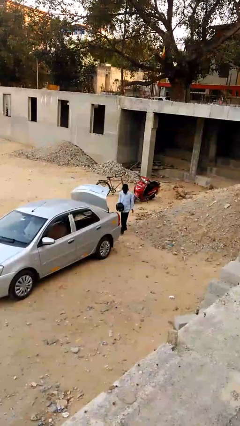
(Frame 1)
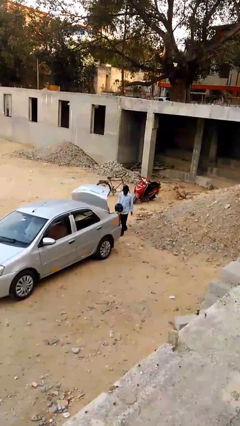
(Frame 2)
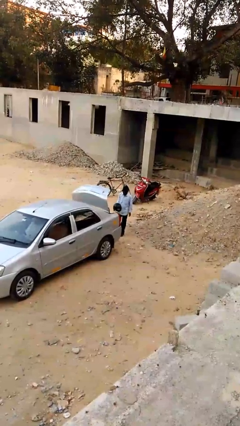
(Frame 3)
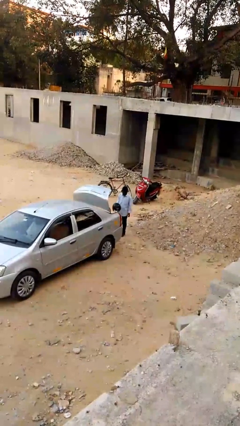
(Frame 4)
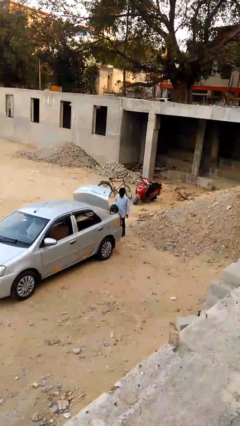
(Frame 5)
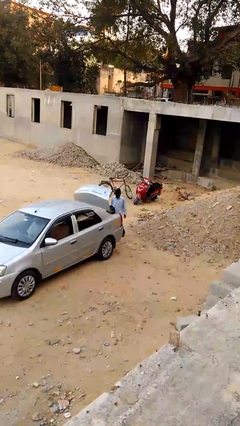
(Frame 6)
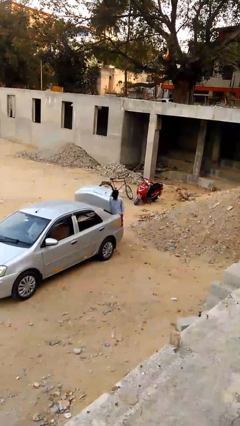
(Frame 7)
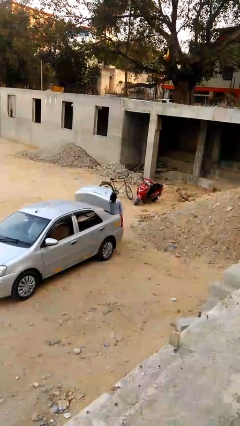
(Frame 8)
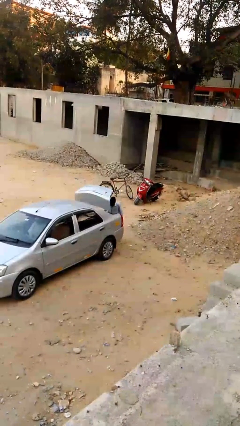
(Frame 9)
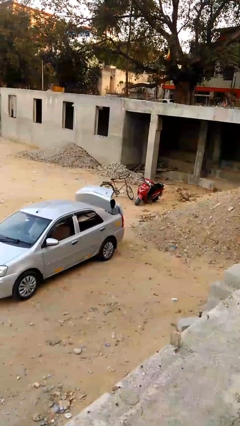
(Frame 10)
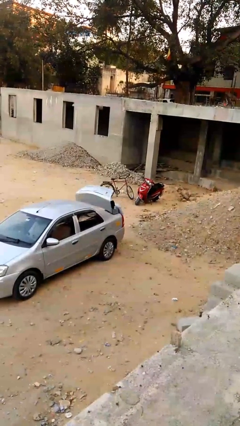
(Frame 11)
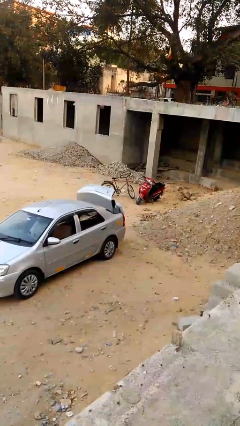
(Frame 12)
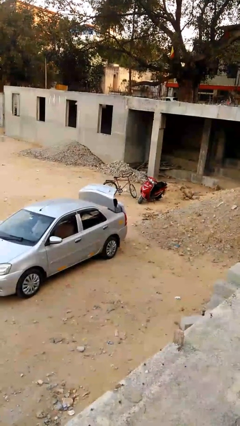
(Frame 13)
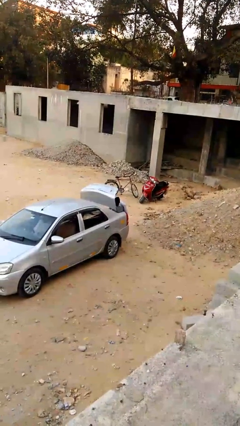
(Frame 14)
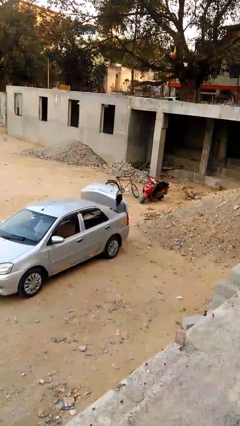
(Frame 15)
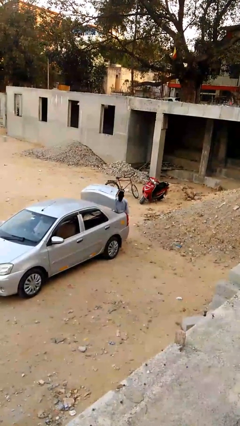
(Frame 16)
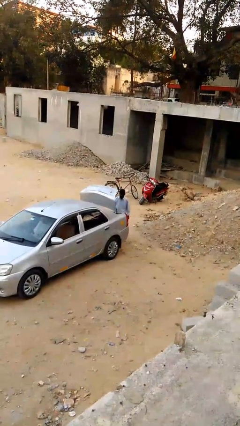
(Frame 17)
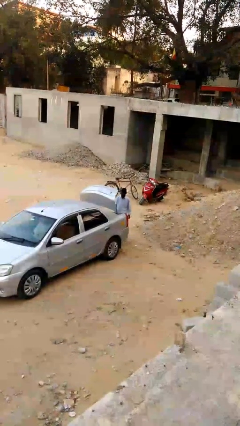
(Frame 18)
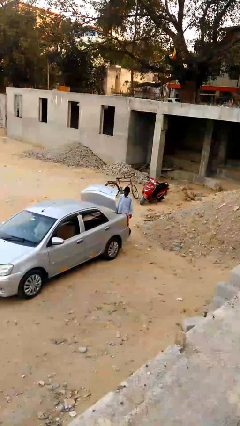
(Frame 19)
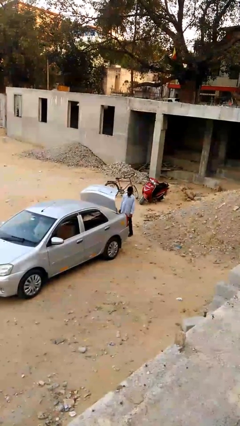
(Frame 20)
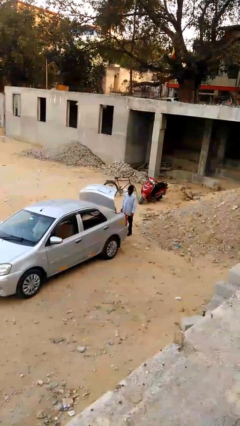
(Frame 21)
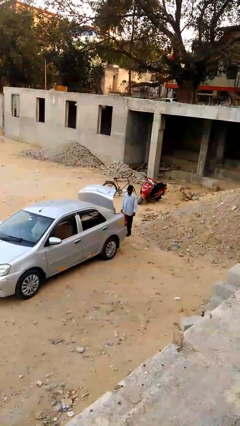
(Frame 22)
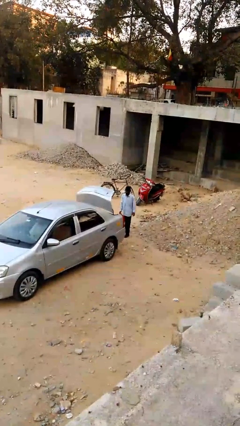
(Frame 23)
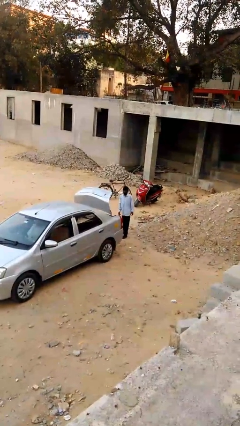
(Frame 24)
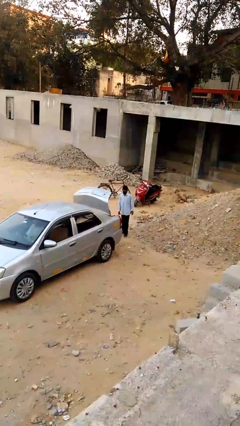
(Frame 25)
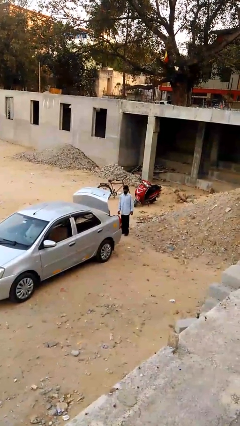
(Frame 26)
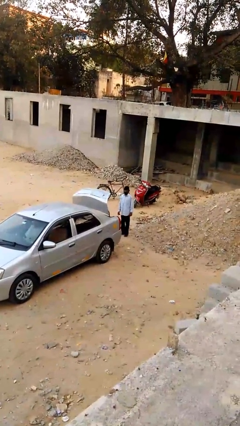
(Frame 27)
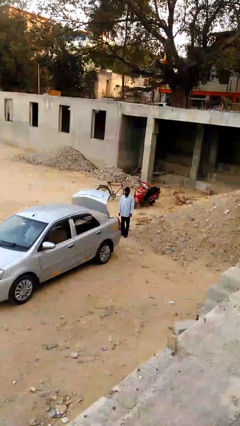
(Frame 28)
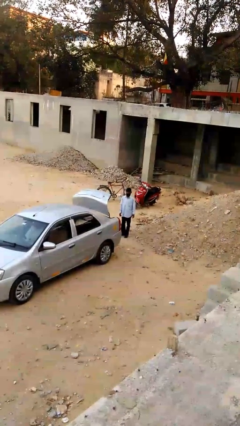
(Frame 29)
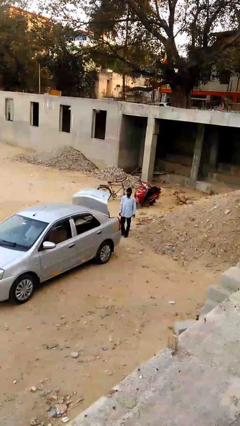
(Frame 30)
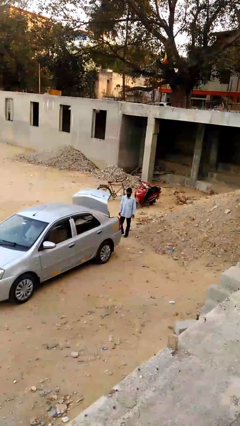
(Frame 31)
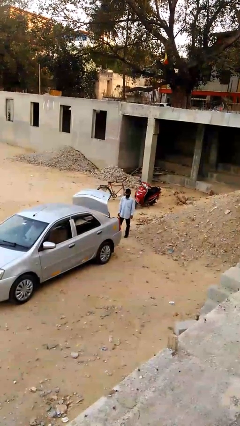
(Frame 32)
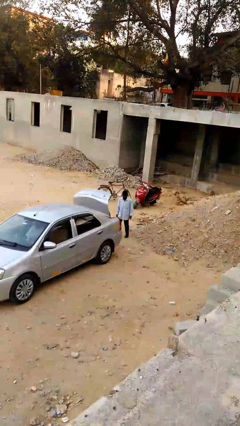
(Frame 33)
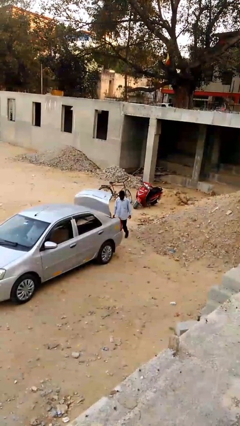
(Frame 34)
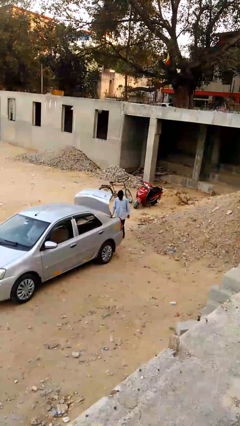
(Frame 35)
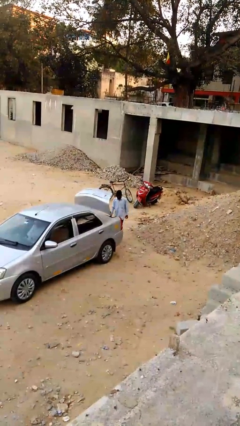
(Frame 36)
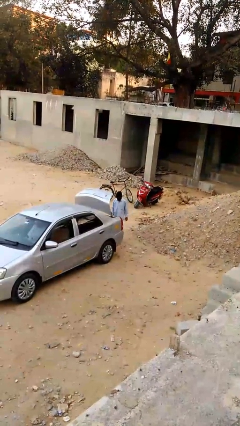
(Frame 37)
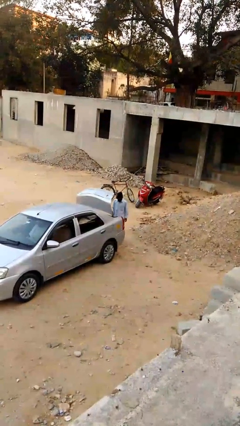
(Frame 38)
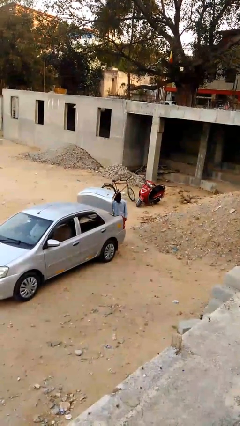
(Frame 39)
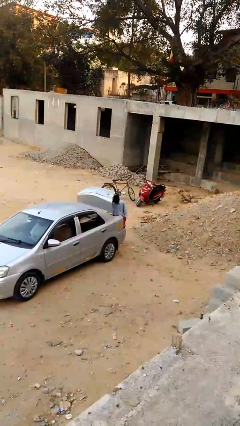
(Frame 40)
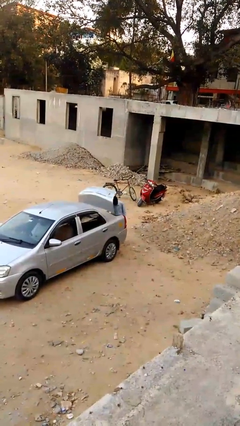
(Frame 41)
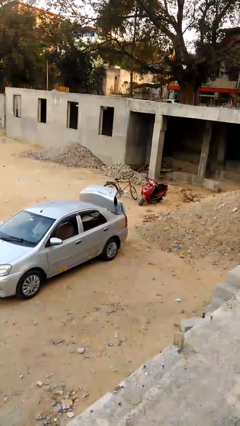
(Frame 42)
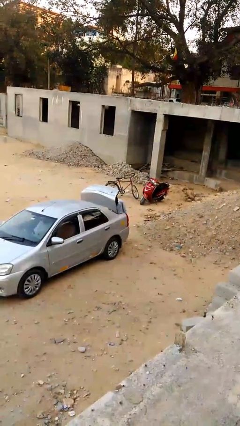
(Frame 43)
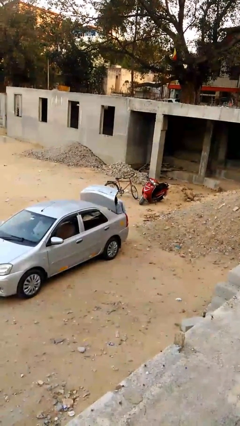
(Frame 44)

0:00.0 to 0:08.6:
person loads car

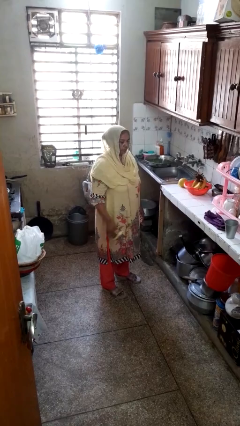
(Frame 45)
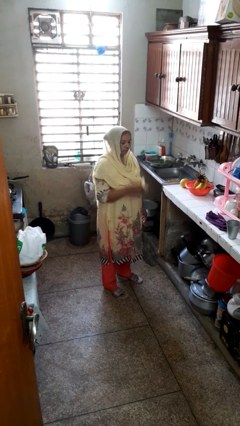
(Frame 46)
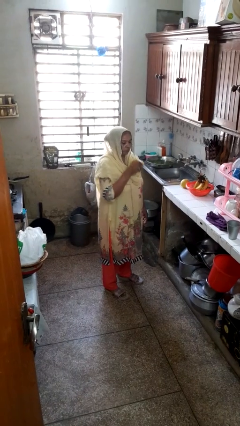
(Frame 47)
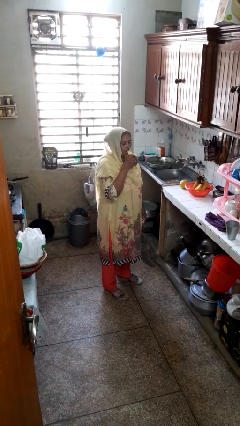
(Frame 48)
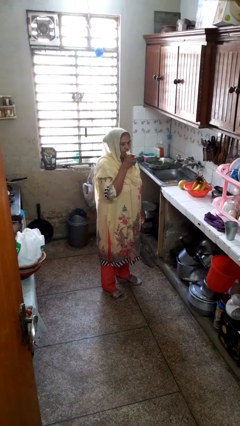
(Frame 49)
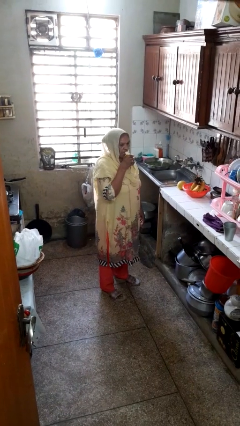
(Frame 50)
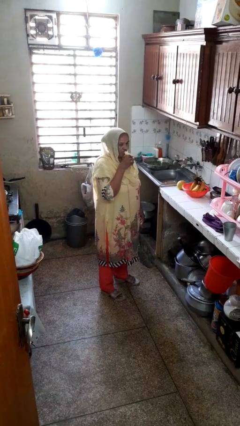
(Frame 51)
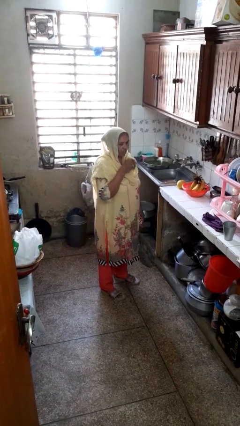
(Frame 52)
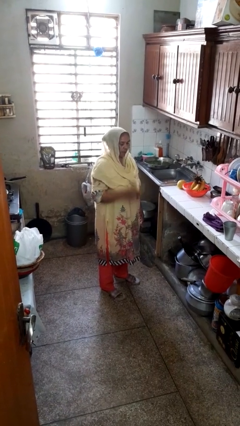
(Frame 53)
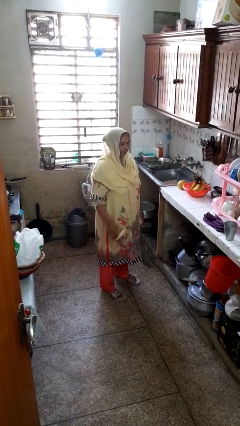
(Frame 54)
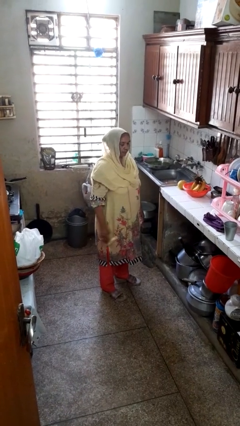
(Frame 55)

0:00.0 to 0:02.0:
person eats banana

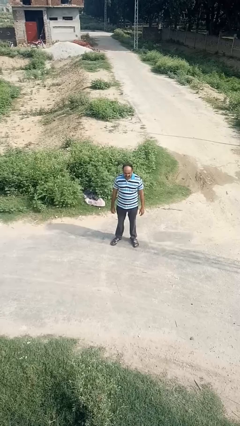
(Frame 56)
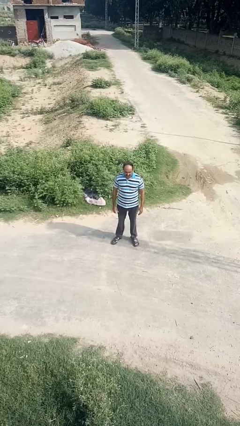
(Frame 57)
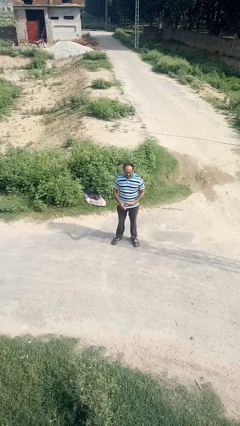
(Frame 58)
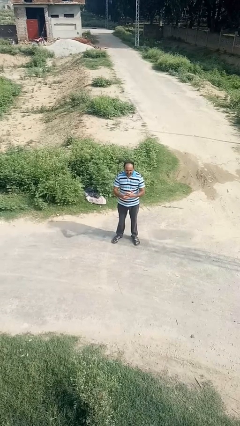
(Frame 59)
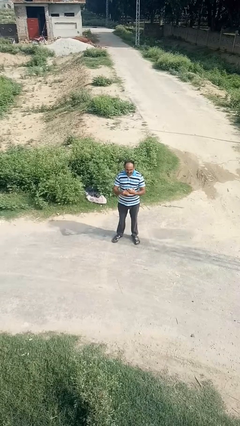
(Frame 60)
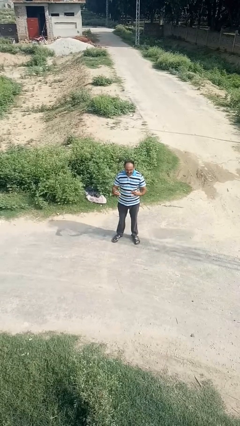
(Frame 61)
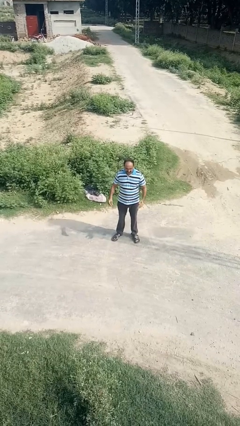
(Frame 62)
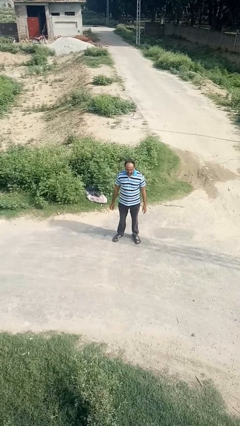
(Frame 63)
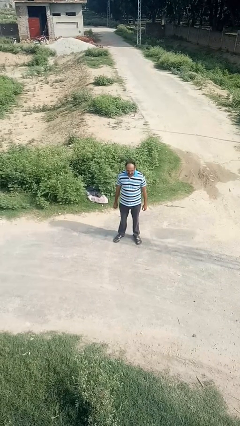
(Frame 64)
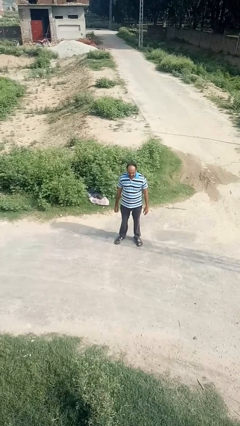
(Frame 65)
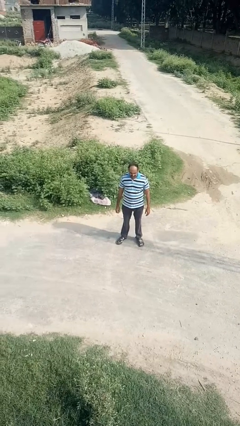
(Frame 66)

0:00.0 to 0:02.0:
person takes off ring

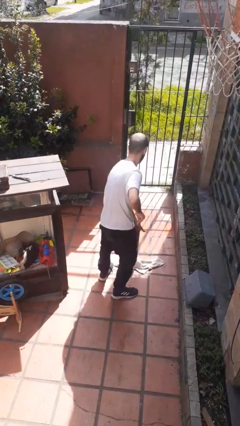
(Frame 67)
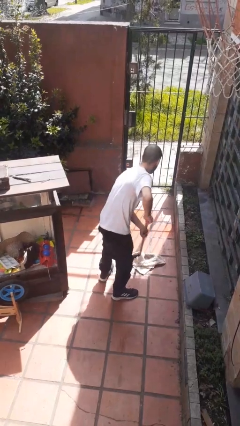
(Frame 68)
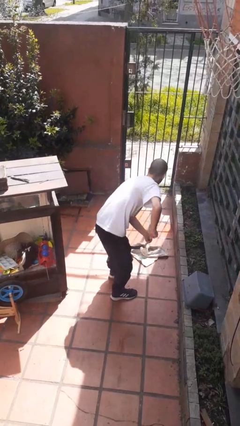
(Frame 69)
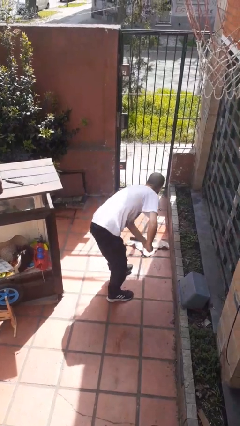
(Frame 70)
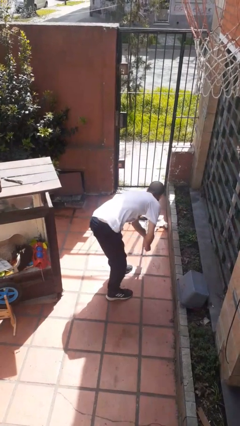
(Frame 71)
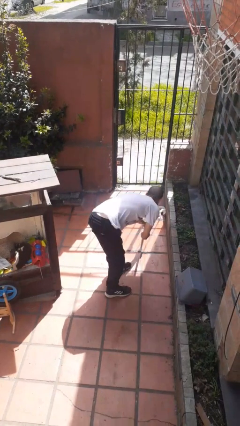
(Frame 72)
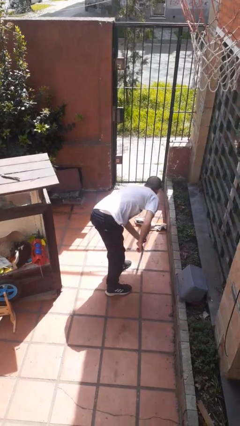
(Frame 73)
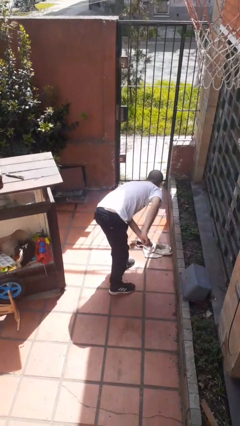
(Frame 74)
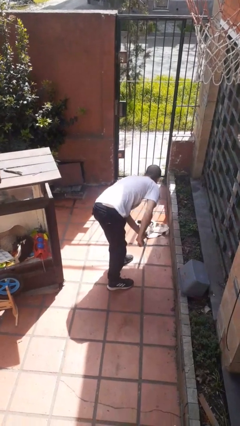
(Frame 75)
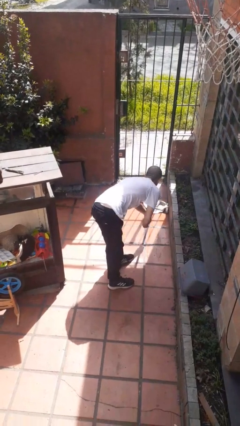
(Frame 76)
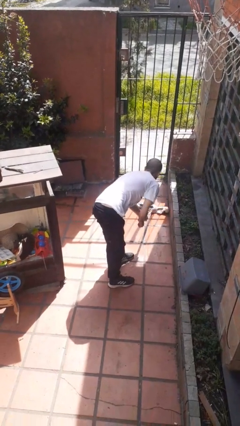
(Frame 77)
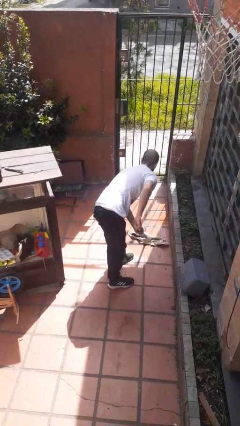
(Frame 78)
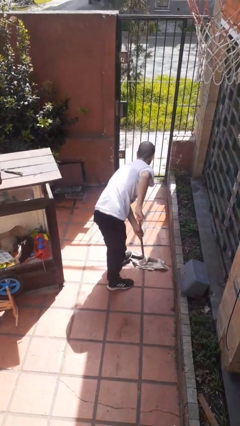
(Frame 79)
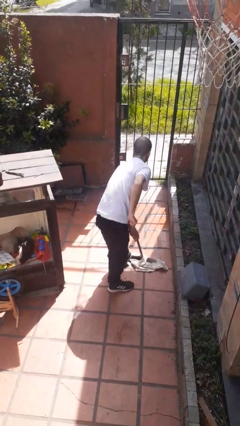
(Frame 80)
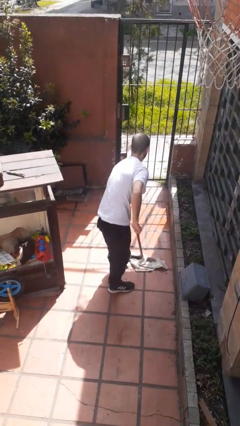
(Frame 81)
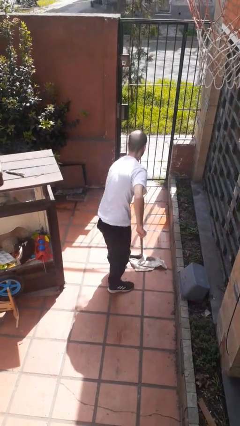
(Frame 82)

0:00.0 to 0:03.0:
person mops

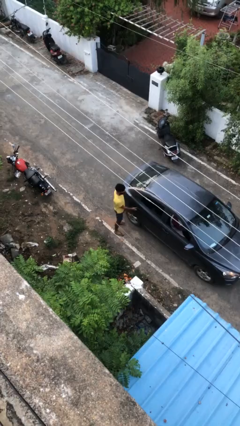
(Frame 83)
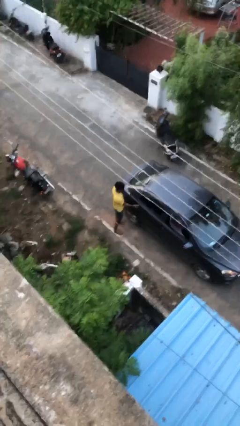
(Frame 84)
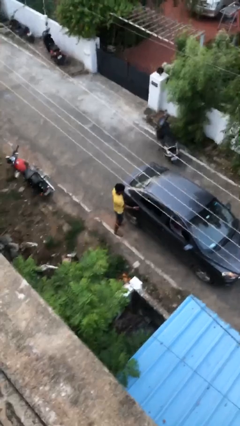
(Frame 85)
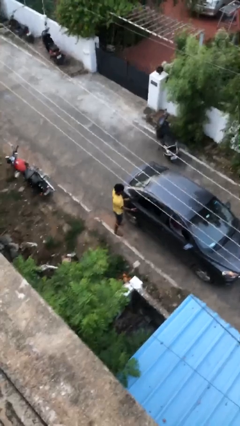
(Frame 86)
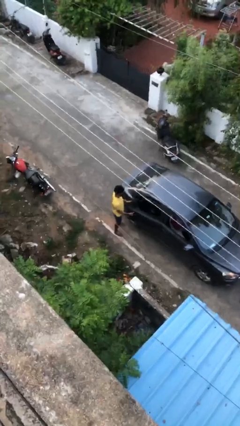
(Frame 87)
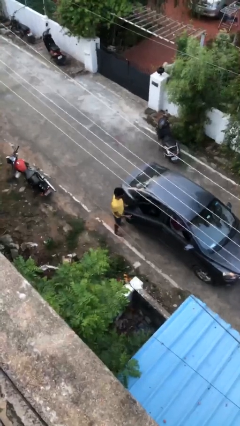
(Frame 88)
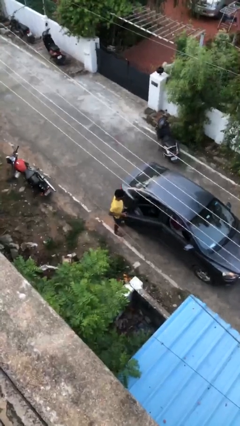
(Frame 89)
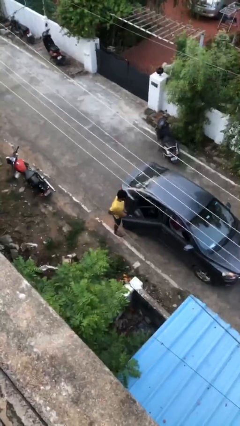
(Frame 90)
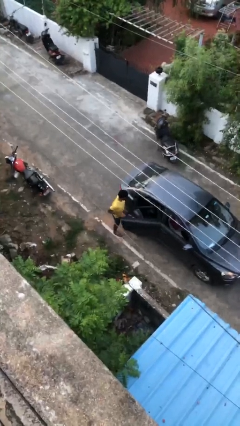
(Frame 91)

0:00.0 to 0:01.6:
person opens car door

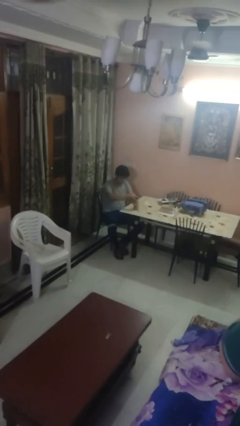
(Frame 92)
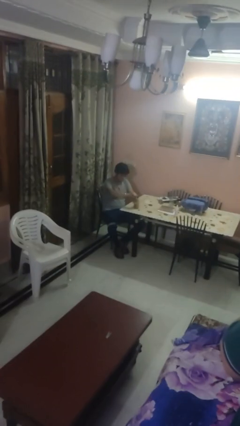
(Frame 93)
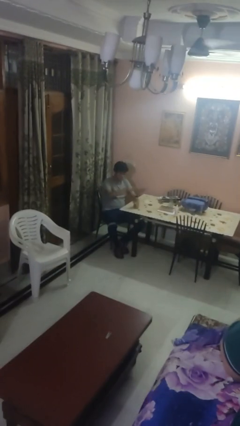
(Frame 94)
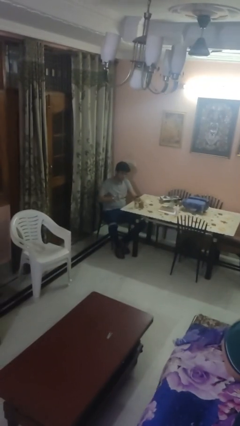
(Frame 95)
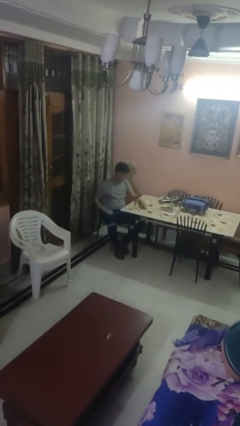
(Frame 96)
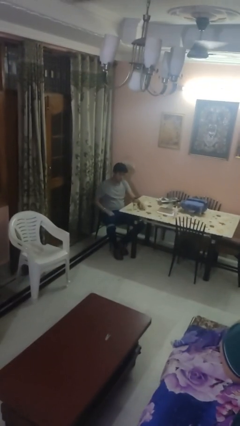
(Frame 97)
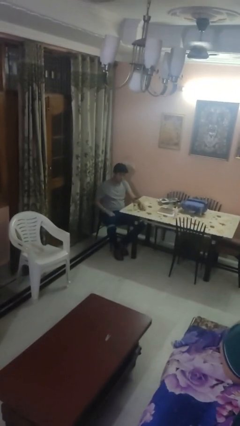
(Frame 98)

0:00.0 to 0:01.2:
person screws lid to bottle
